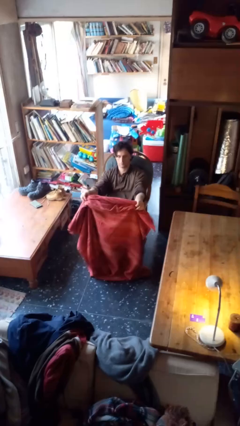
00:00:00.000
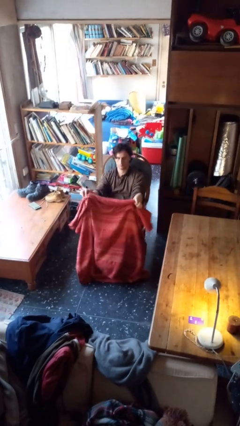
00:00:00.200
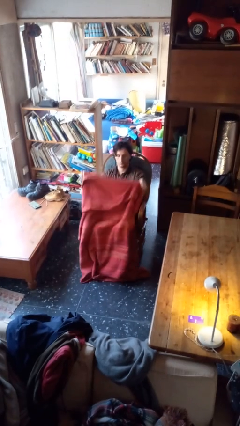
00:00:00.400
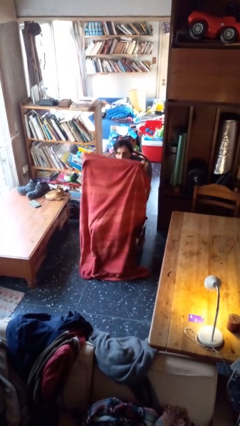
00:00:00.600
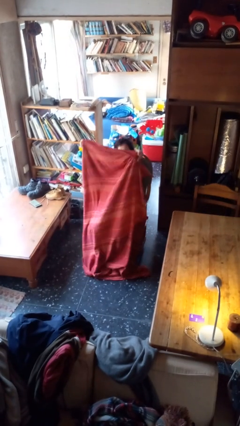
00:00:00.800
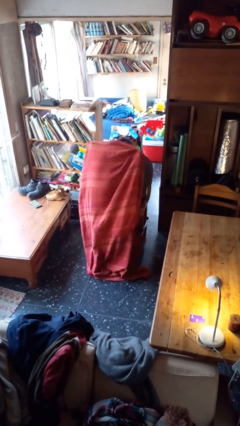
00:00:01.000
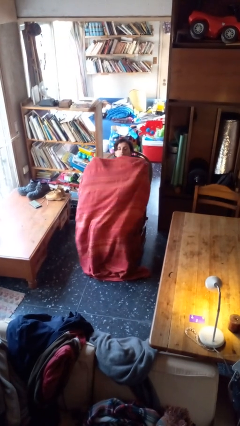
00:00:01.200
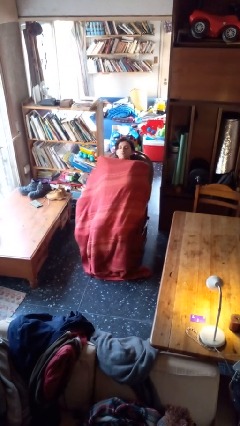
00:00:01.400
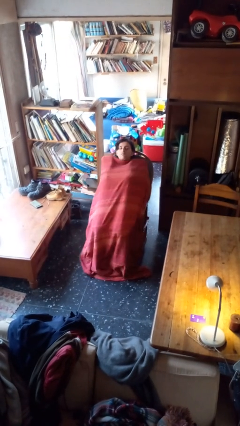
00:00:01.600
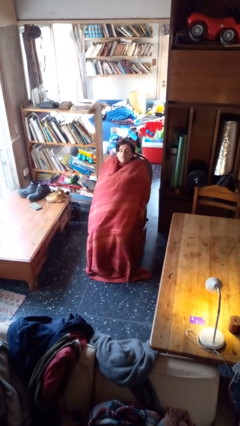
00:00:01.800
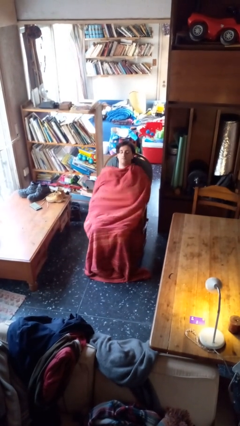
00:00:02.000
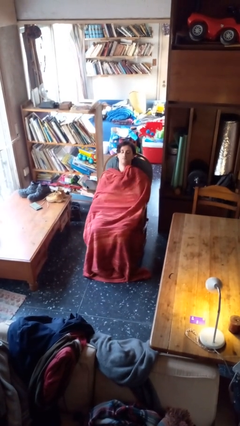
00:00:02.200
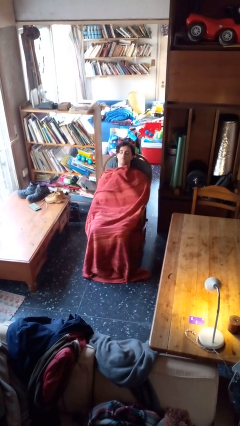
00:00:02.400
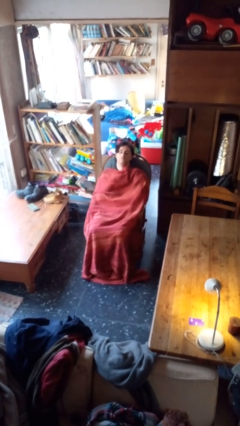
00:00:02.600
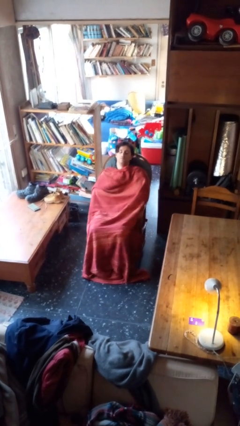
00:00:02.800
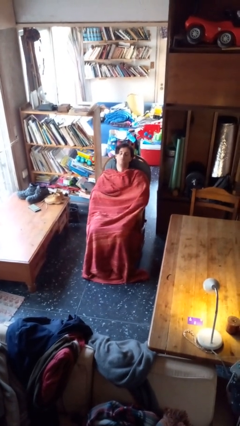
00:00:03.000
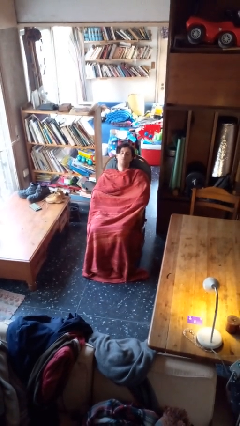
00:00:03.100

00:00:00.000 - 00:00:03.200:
person covers with blanket

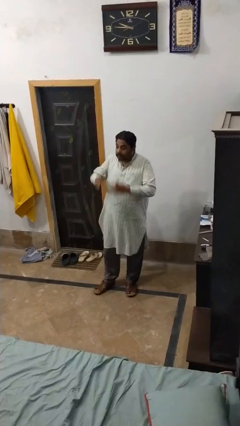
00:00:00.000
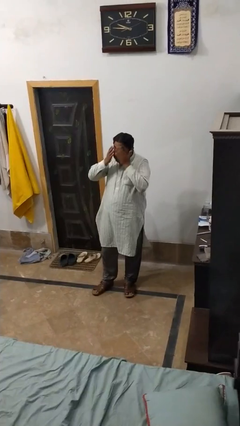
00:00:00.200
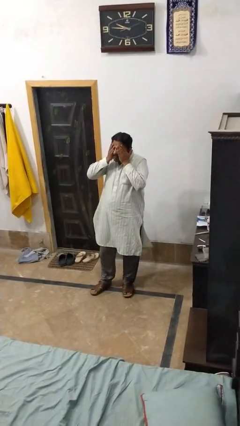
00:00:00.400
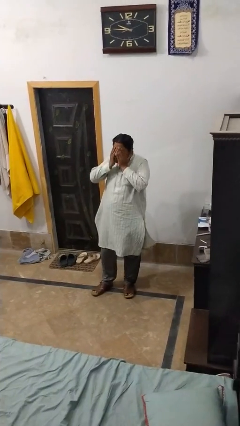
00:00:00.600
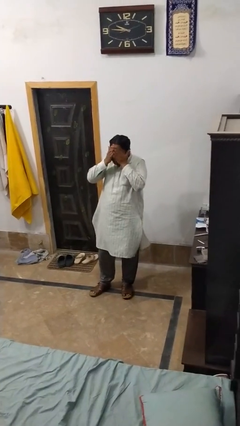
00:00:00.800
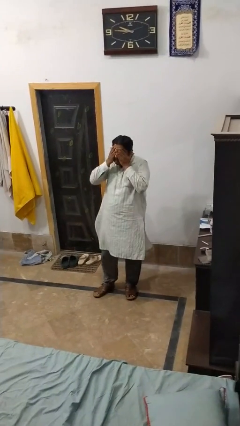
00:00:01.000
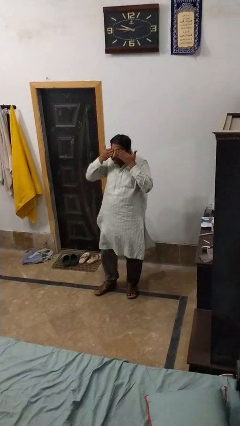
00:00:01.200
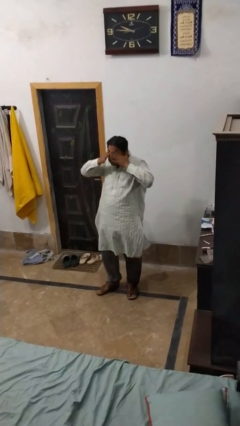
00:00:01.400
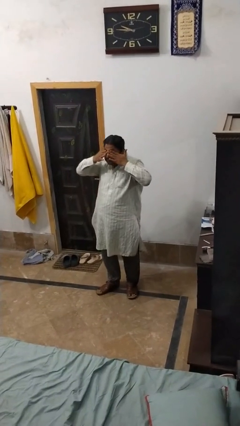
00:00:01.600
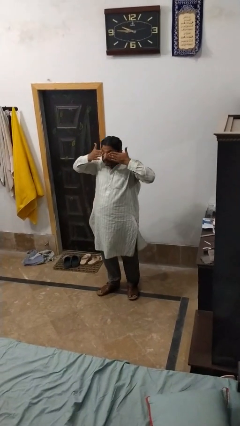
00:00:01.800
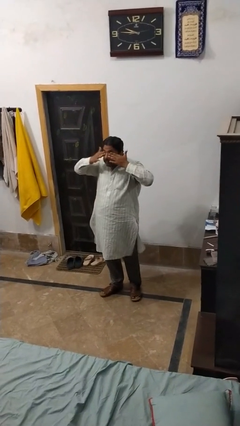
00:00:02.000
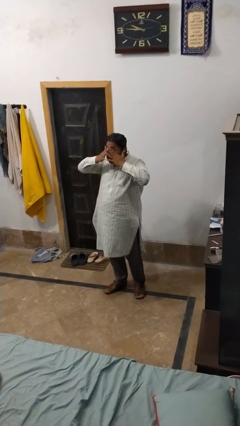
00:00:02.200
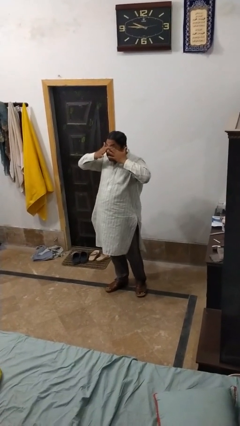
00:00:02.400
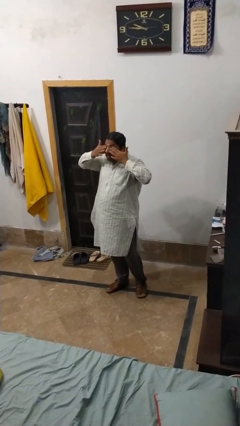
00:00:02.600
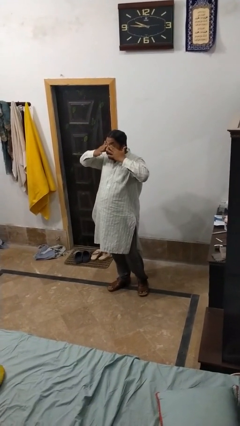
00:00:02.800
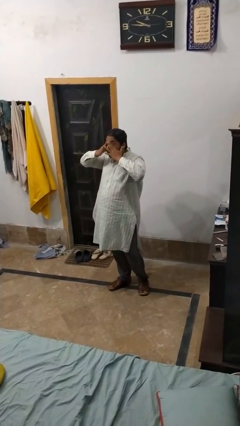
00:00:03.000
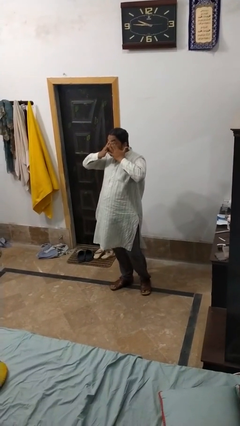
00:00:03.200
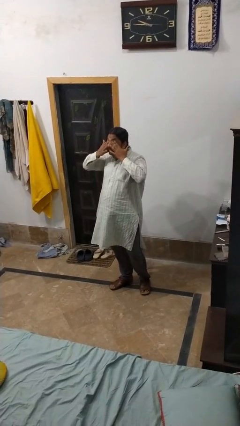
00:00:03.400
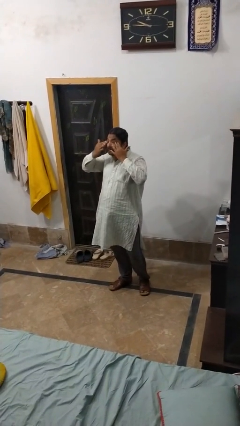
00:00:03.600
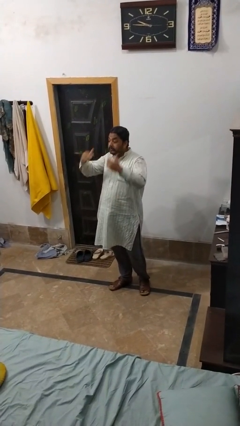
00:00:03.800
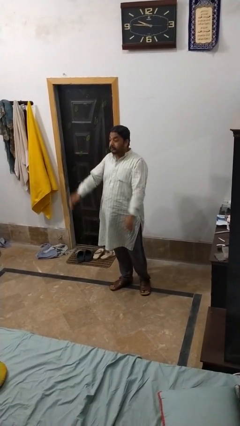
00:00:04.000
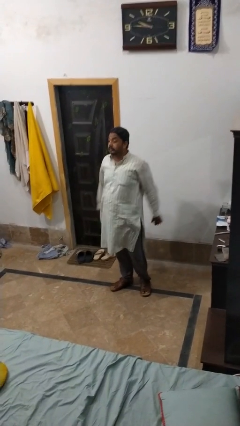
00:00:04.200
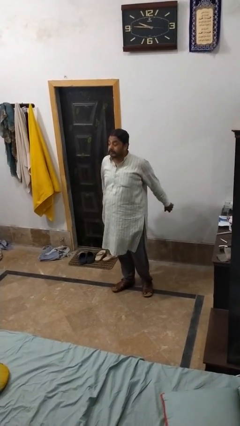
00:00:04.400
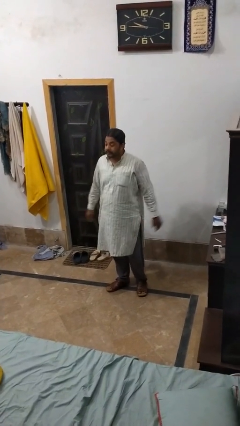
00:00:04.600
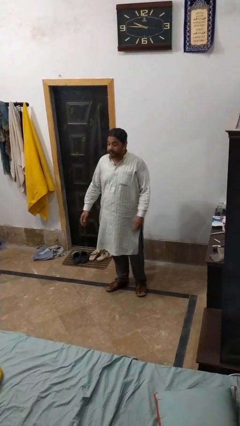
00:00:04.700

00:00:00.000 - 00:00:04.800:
person rubs eyes

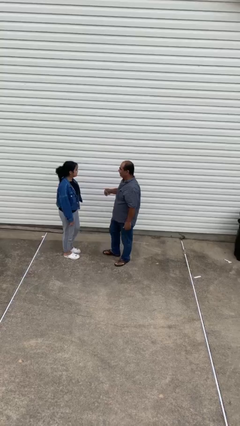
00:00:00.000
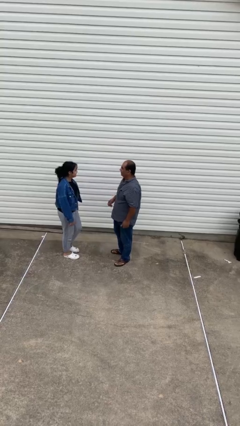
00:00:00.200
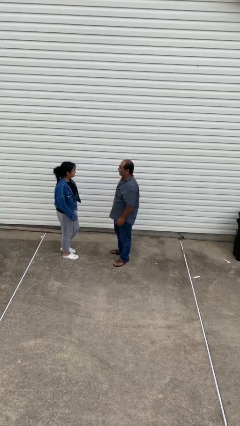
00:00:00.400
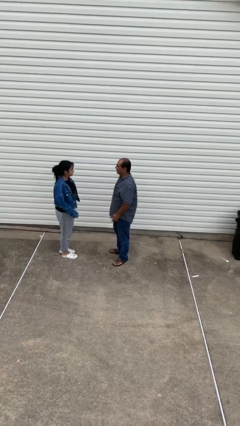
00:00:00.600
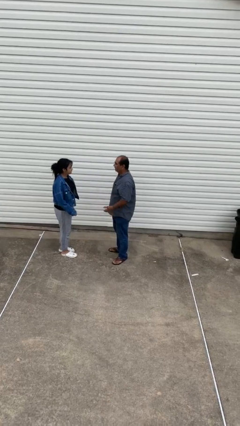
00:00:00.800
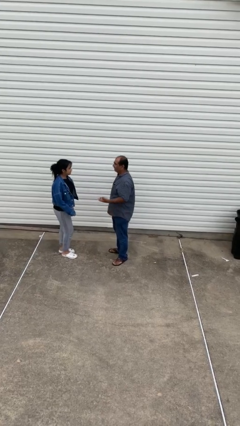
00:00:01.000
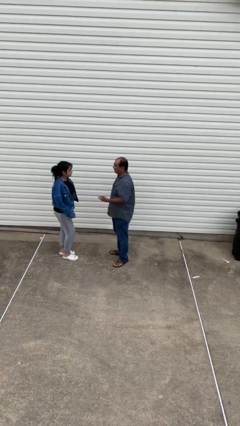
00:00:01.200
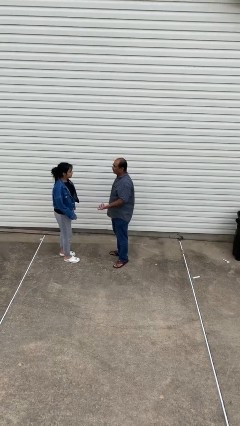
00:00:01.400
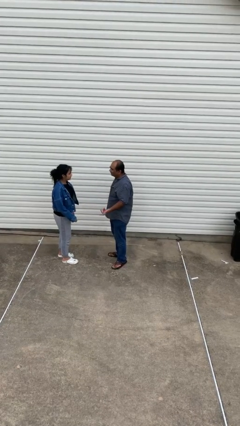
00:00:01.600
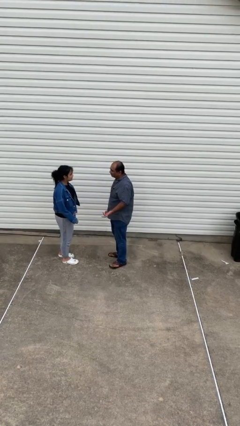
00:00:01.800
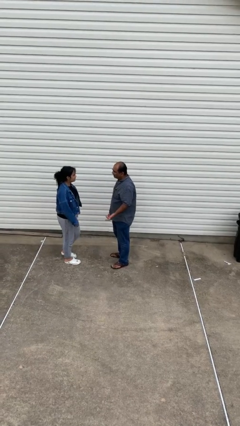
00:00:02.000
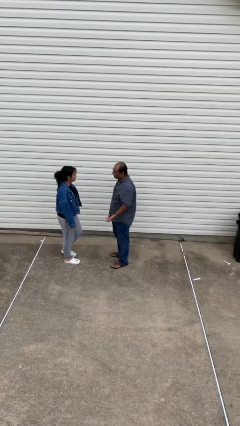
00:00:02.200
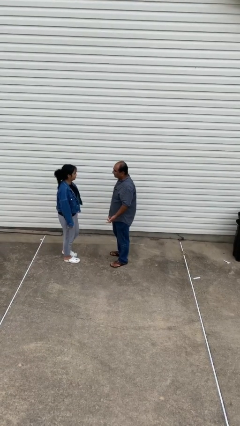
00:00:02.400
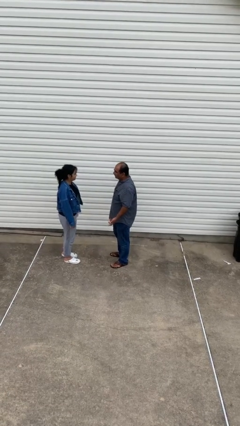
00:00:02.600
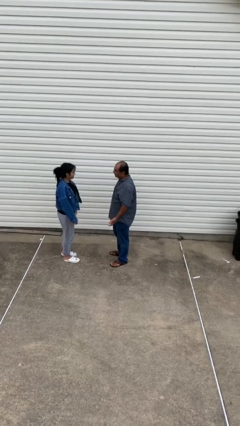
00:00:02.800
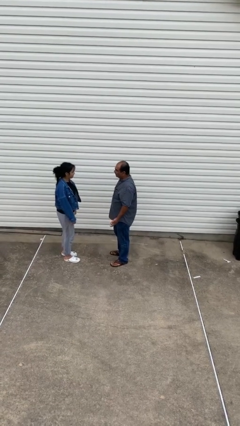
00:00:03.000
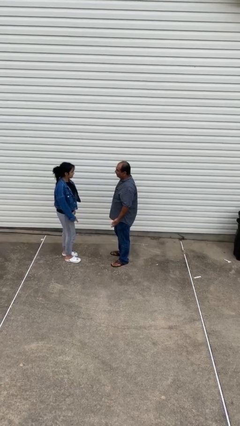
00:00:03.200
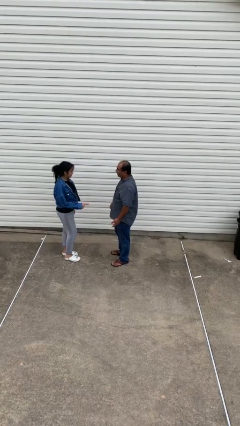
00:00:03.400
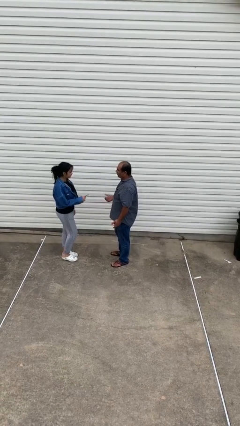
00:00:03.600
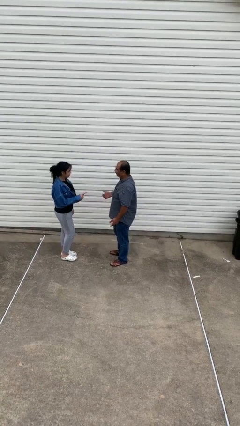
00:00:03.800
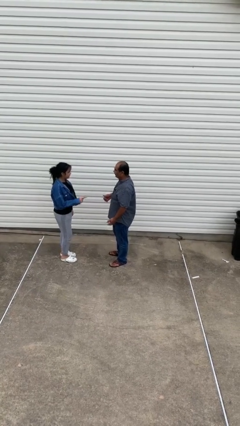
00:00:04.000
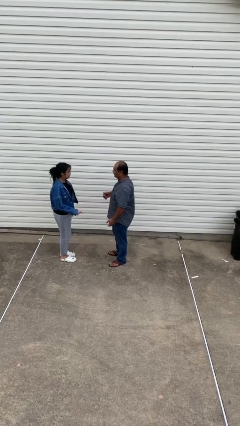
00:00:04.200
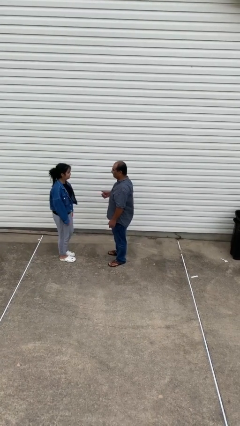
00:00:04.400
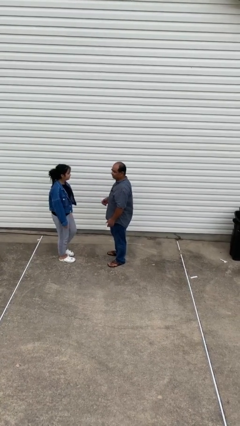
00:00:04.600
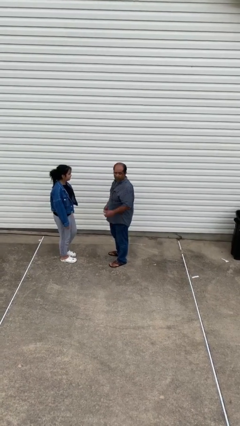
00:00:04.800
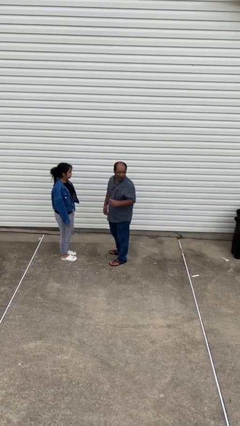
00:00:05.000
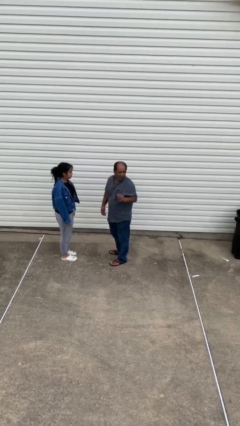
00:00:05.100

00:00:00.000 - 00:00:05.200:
person talks to person

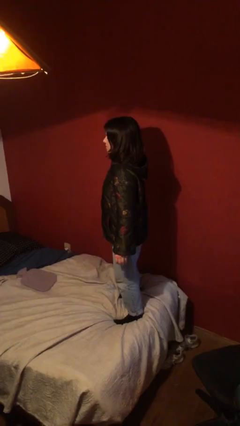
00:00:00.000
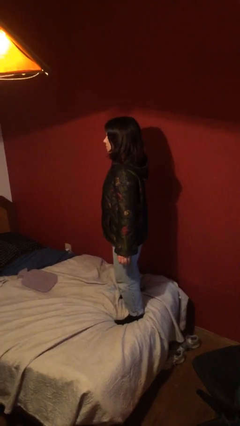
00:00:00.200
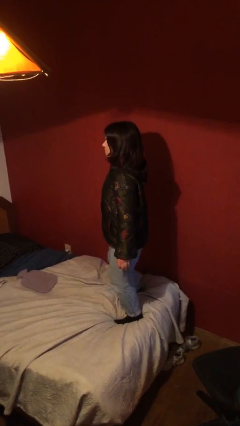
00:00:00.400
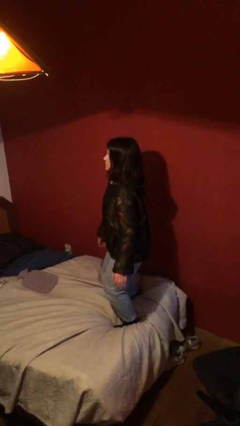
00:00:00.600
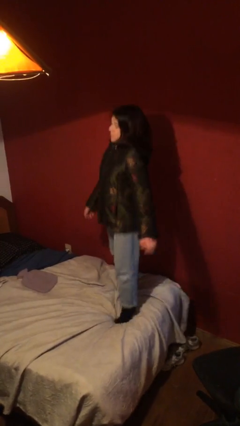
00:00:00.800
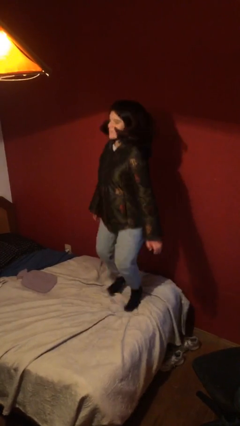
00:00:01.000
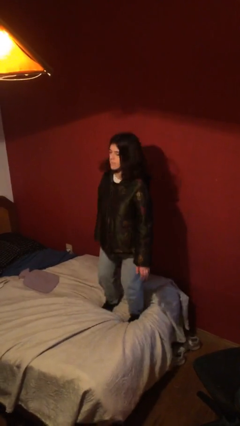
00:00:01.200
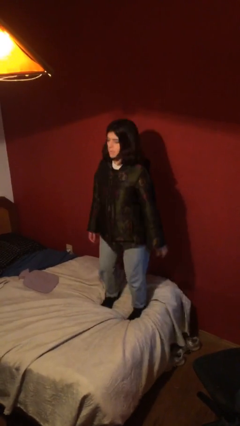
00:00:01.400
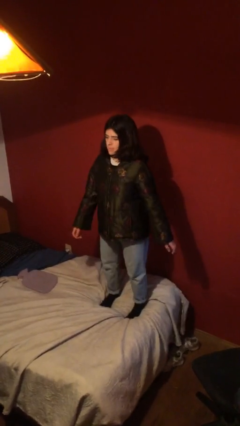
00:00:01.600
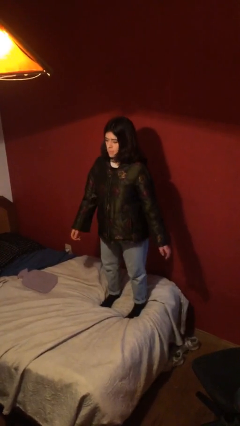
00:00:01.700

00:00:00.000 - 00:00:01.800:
person jumps on bed

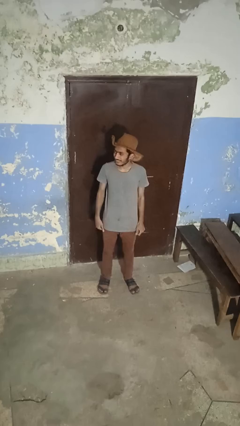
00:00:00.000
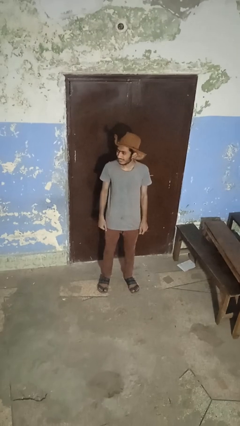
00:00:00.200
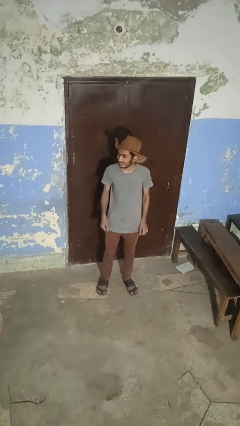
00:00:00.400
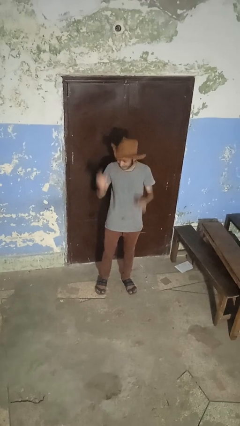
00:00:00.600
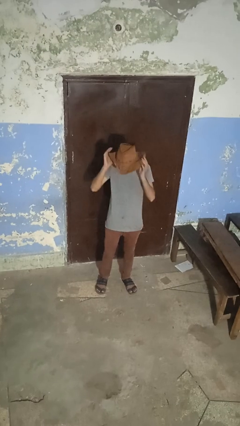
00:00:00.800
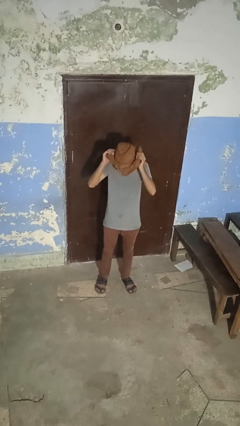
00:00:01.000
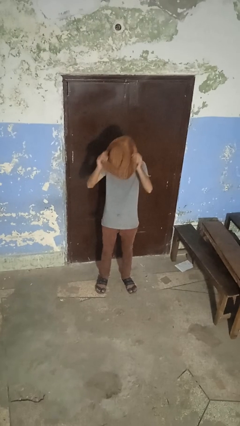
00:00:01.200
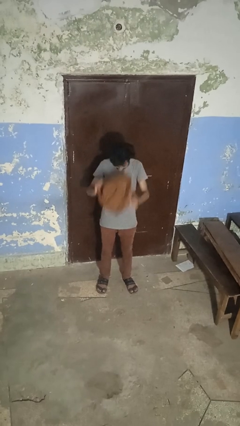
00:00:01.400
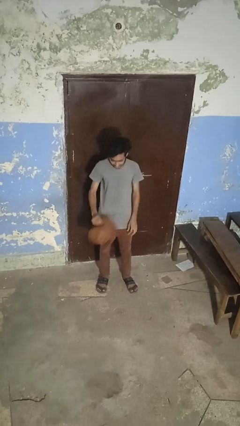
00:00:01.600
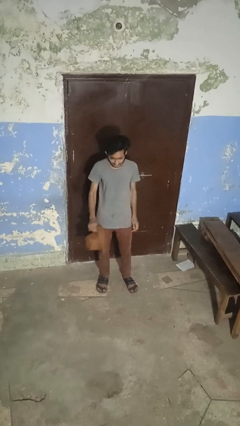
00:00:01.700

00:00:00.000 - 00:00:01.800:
person takes off hat

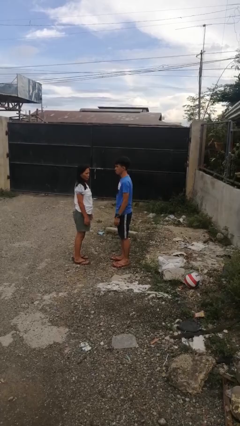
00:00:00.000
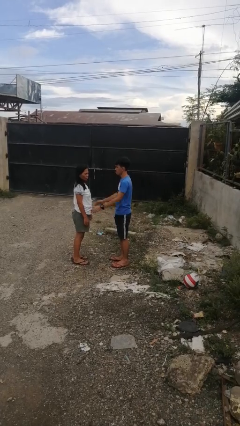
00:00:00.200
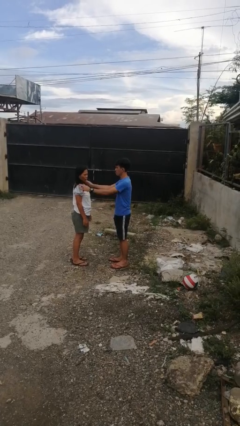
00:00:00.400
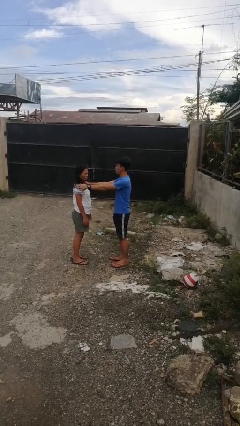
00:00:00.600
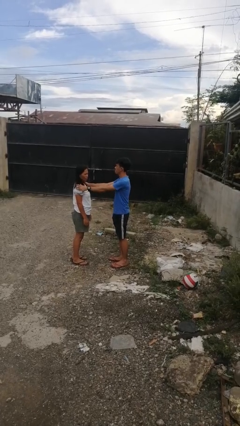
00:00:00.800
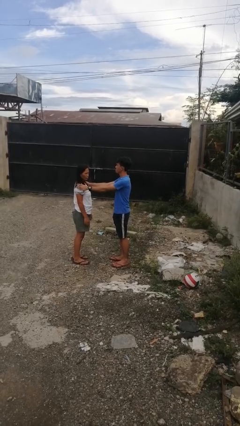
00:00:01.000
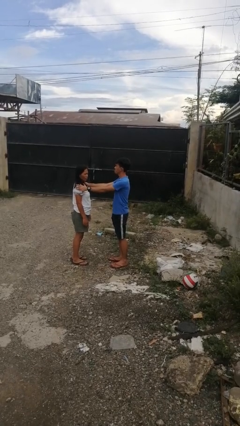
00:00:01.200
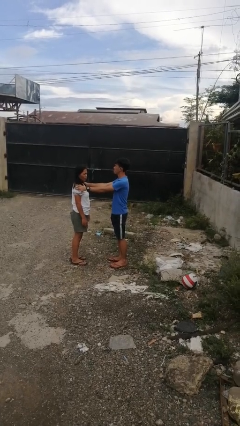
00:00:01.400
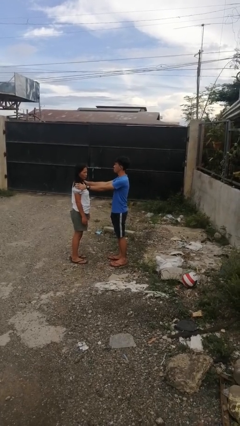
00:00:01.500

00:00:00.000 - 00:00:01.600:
person grabs person by shoulder
